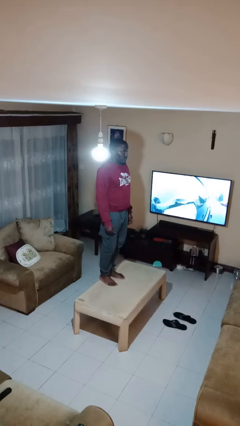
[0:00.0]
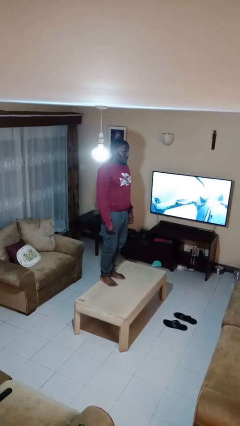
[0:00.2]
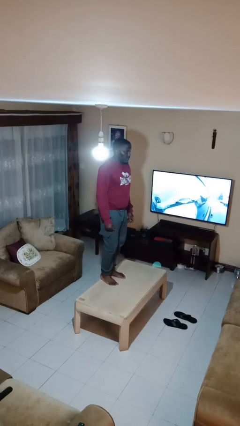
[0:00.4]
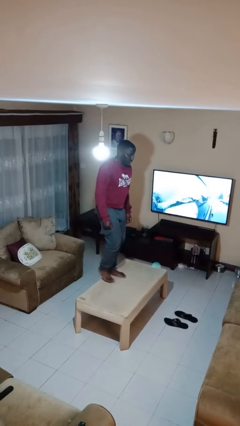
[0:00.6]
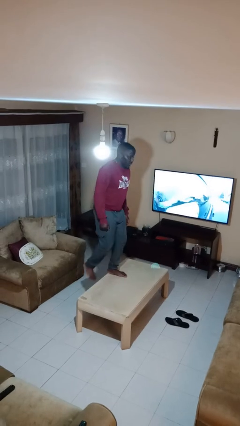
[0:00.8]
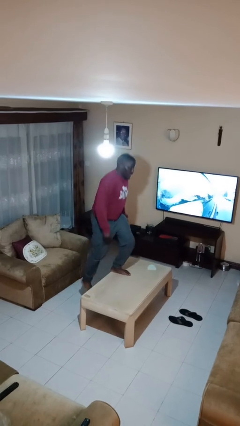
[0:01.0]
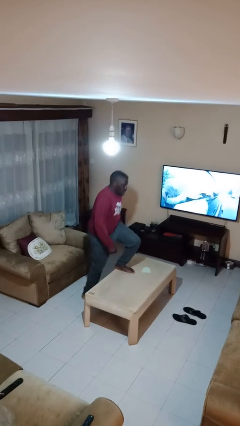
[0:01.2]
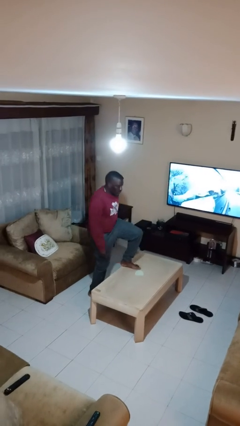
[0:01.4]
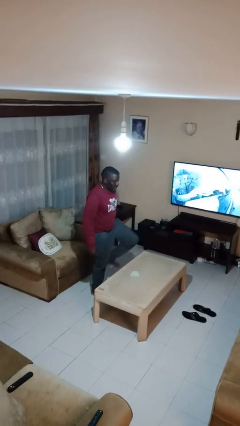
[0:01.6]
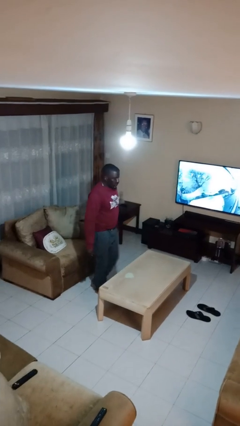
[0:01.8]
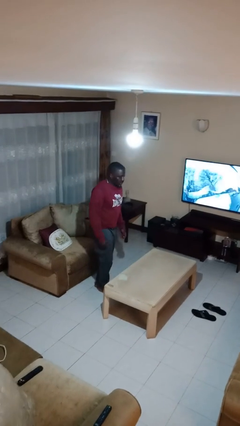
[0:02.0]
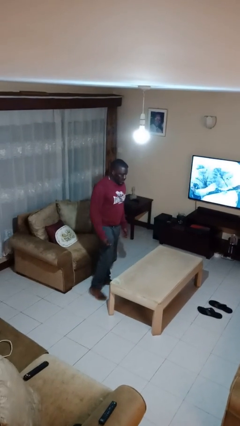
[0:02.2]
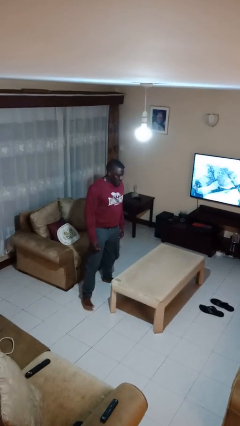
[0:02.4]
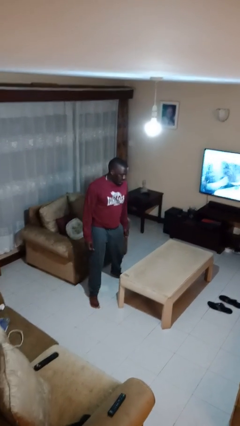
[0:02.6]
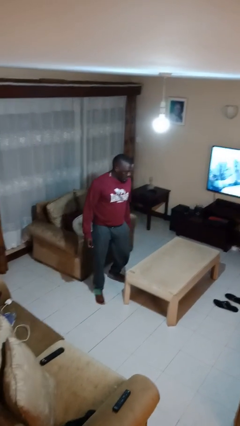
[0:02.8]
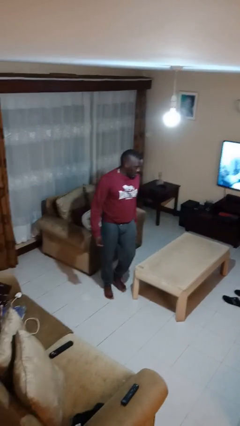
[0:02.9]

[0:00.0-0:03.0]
person climbs off table

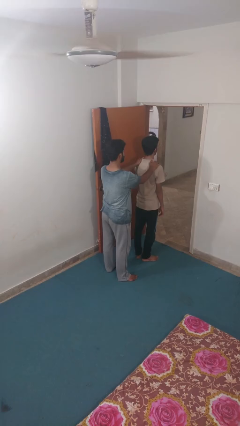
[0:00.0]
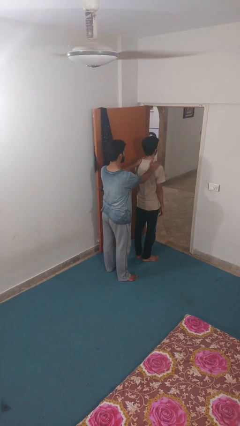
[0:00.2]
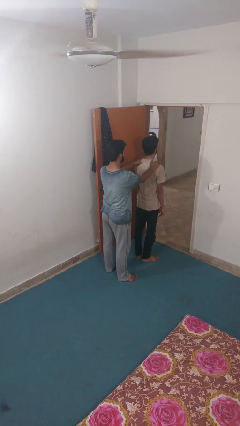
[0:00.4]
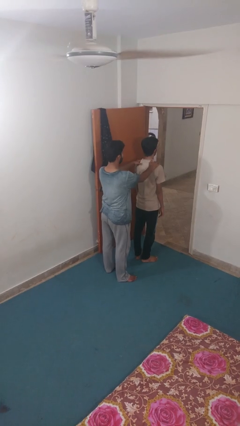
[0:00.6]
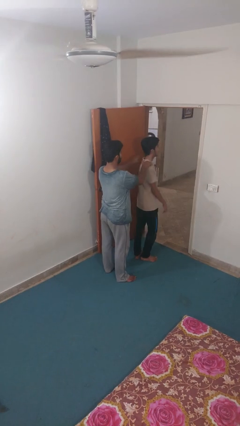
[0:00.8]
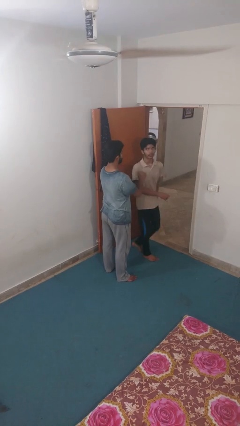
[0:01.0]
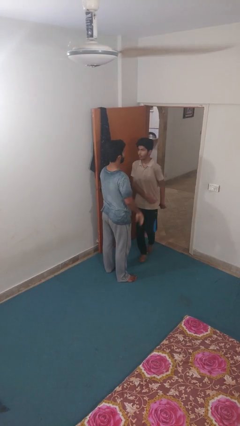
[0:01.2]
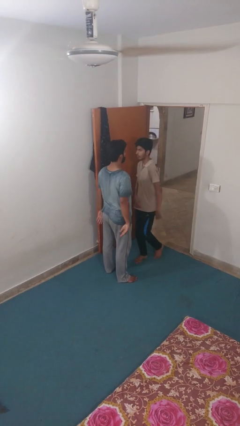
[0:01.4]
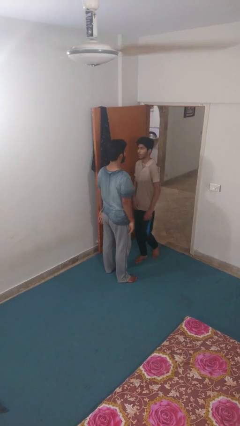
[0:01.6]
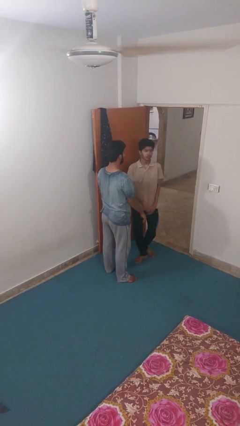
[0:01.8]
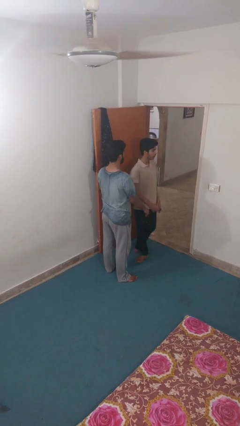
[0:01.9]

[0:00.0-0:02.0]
person spins person around

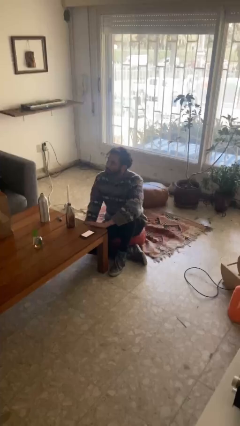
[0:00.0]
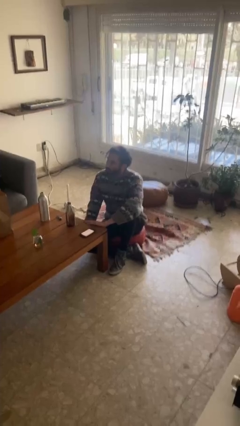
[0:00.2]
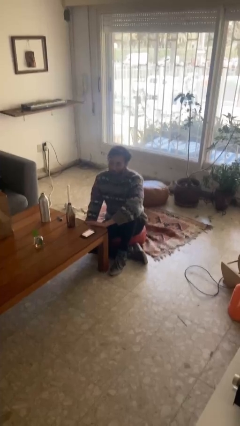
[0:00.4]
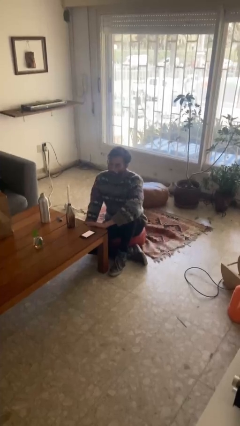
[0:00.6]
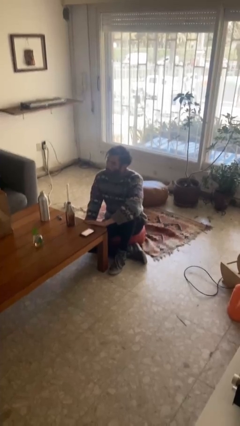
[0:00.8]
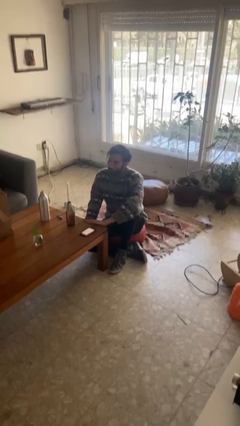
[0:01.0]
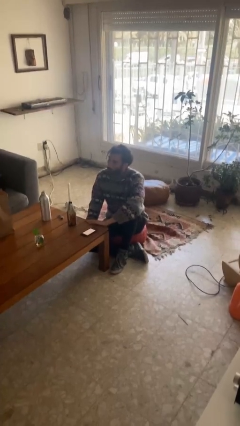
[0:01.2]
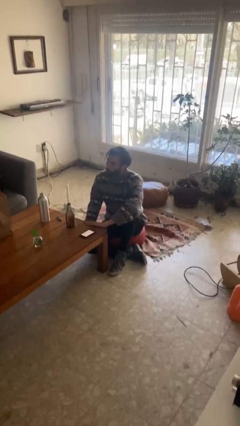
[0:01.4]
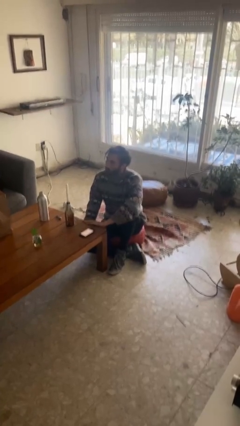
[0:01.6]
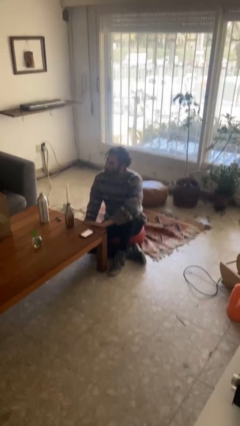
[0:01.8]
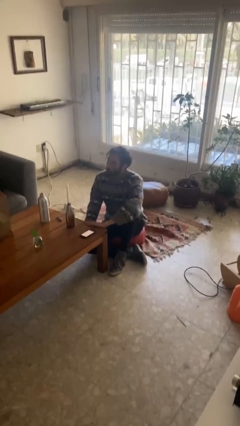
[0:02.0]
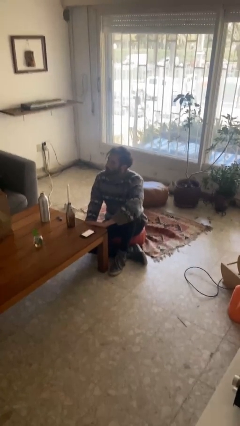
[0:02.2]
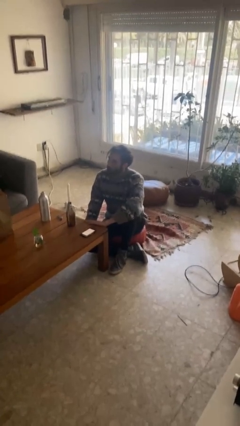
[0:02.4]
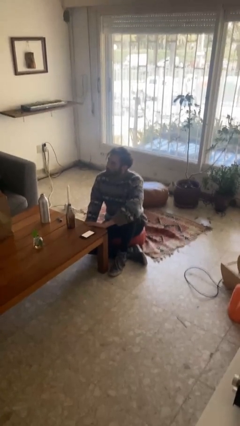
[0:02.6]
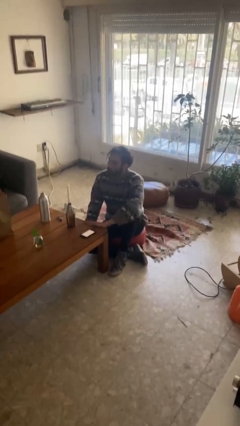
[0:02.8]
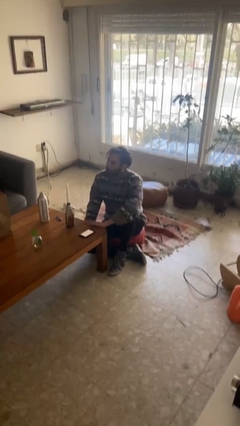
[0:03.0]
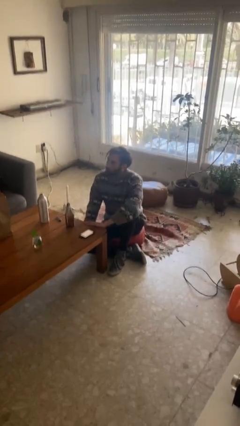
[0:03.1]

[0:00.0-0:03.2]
person shakes head

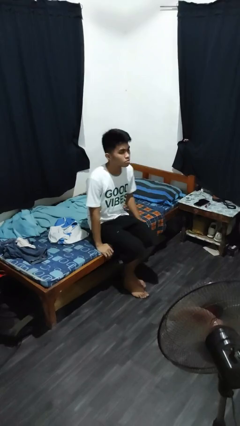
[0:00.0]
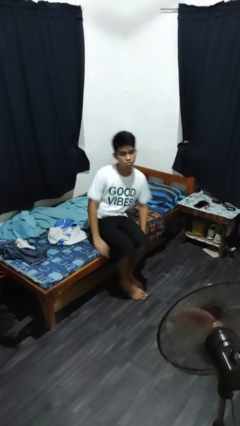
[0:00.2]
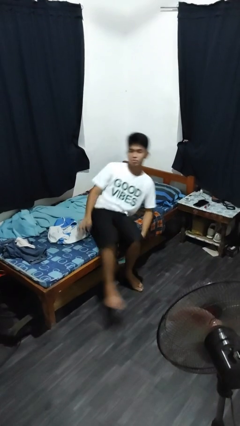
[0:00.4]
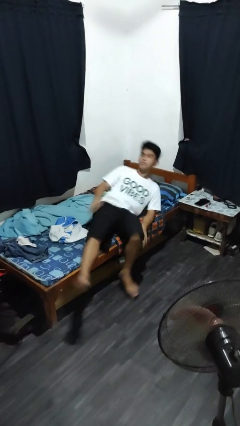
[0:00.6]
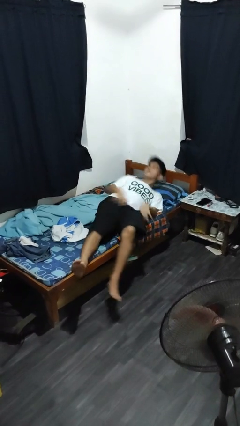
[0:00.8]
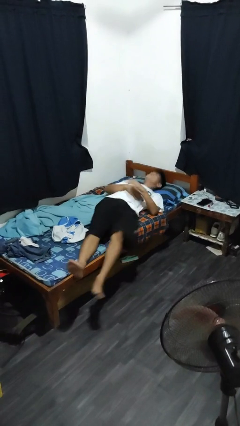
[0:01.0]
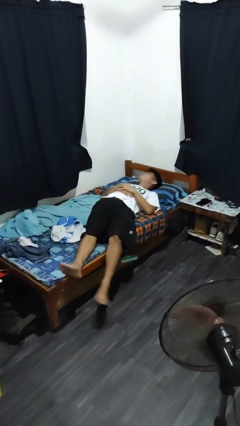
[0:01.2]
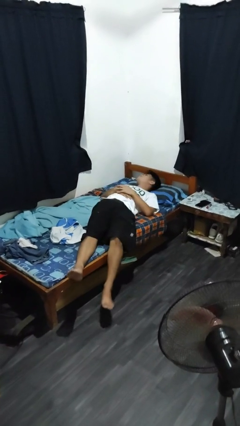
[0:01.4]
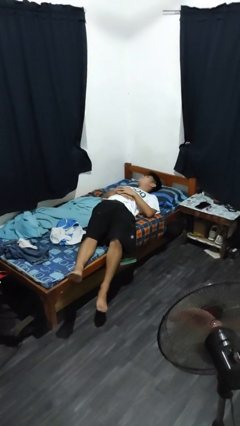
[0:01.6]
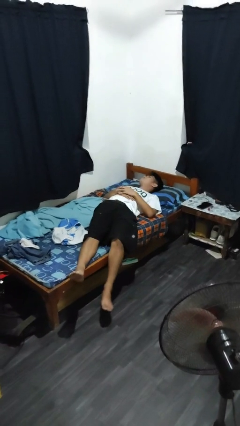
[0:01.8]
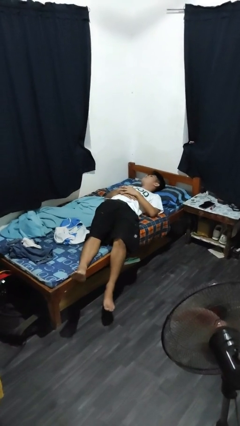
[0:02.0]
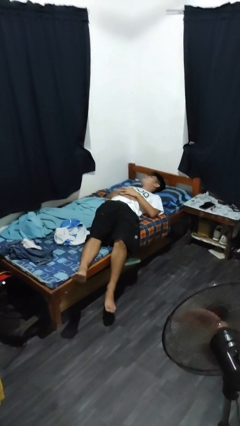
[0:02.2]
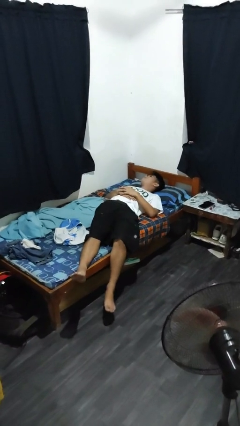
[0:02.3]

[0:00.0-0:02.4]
person lies down on bed

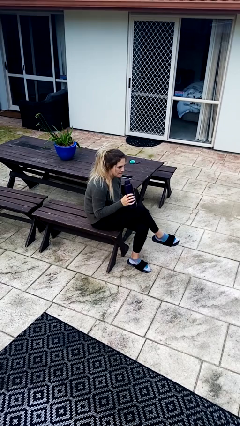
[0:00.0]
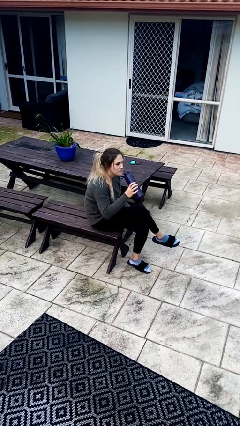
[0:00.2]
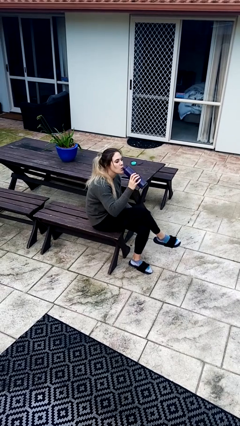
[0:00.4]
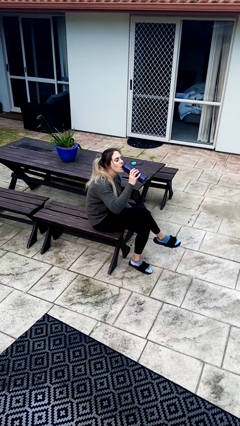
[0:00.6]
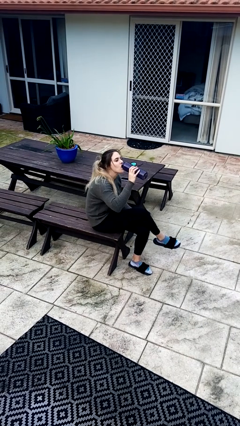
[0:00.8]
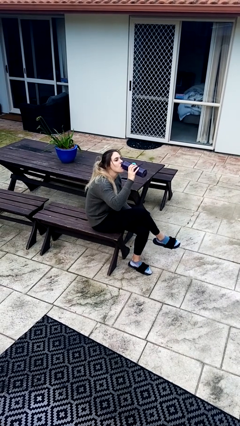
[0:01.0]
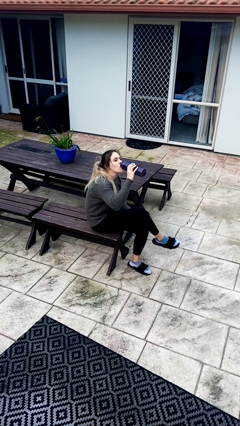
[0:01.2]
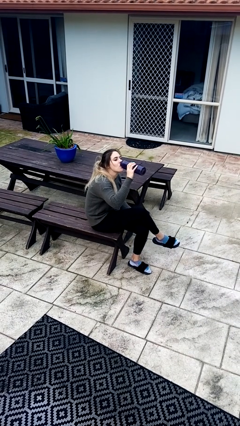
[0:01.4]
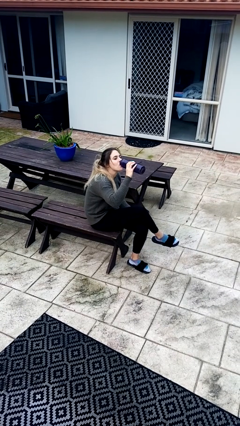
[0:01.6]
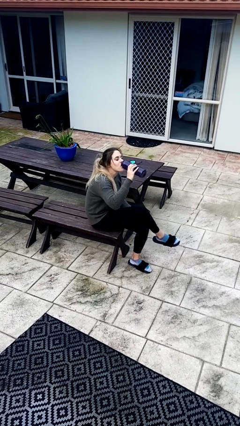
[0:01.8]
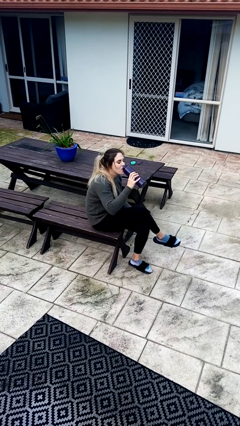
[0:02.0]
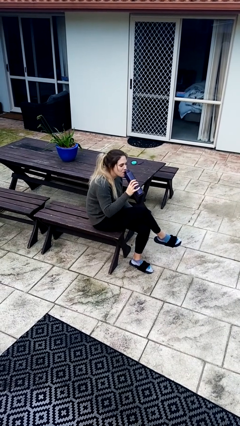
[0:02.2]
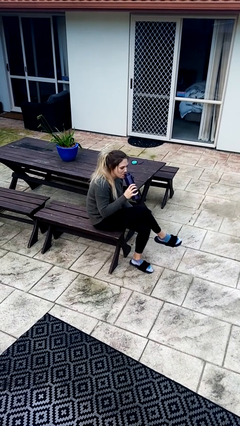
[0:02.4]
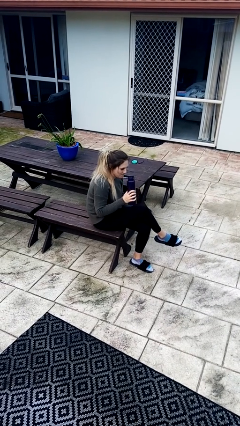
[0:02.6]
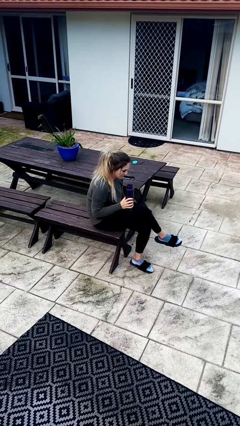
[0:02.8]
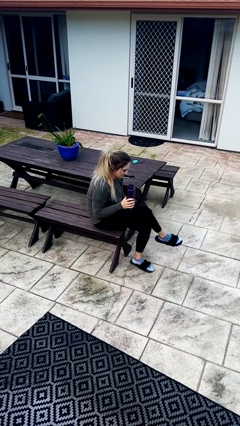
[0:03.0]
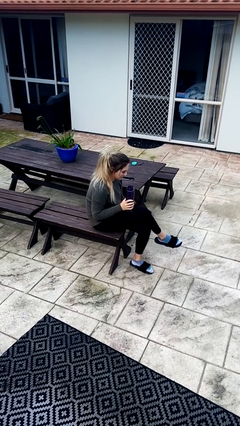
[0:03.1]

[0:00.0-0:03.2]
person drinks from bottle

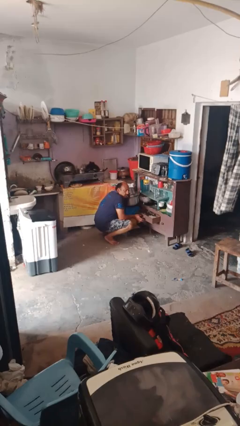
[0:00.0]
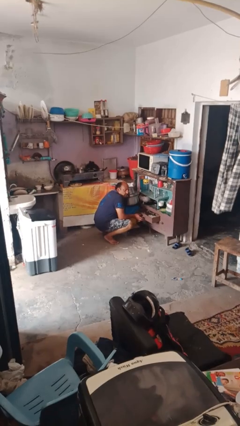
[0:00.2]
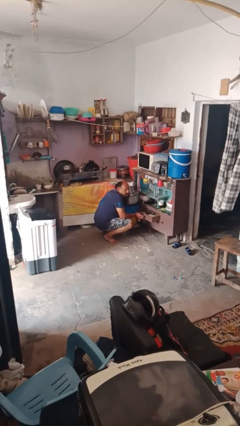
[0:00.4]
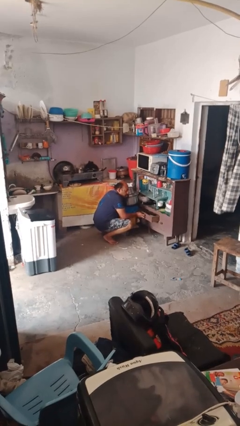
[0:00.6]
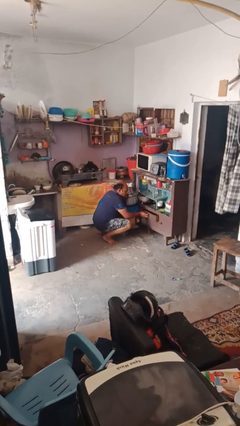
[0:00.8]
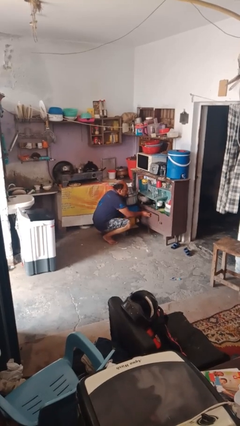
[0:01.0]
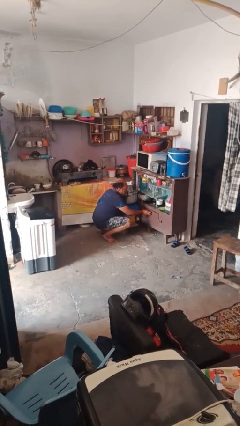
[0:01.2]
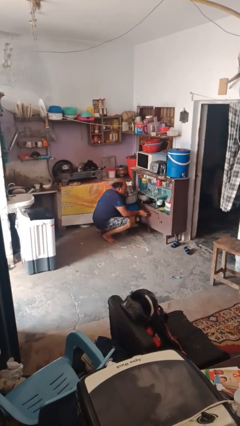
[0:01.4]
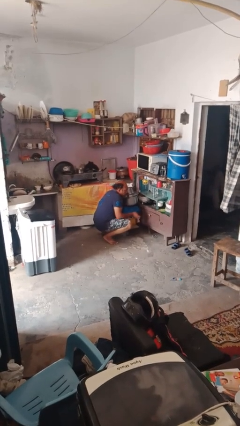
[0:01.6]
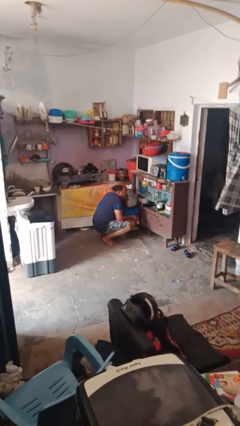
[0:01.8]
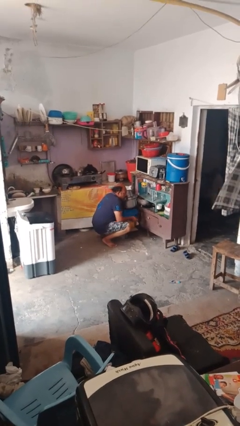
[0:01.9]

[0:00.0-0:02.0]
person closes kitchen drawer

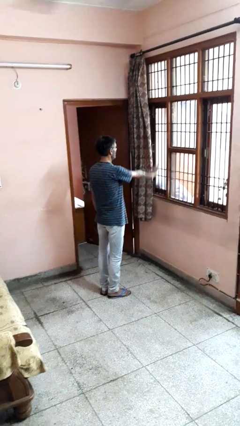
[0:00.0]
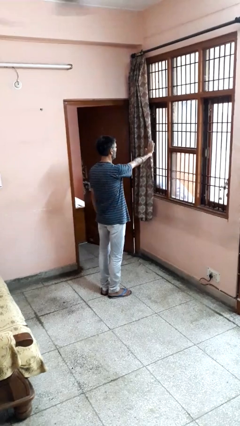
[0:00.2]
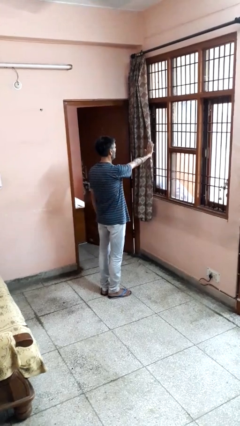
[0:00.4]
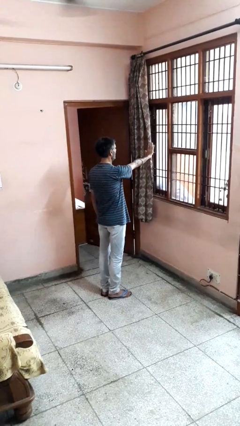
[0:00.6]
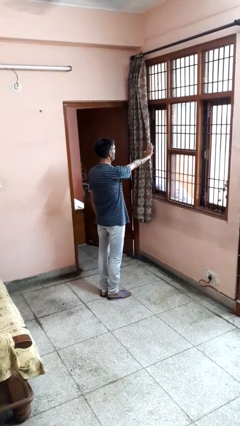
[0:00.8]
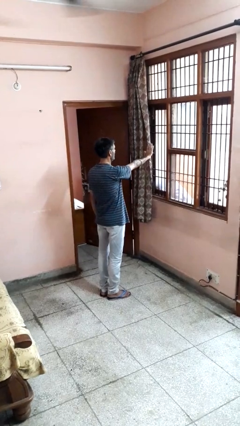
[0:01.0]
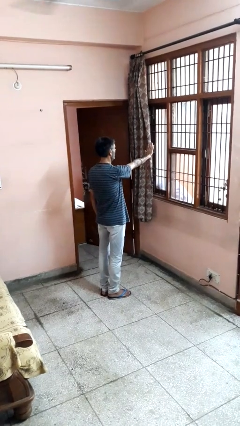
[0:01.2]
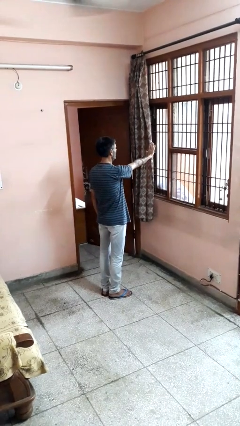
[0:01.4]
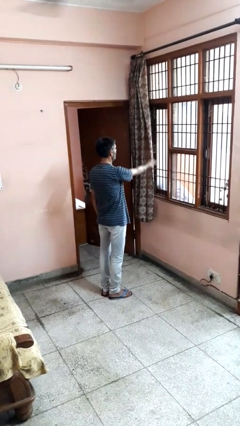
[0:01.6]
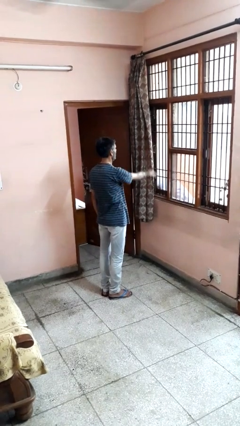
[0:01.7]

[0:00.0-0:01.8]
person gestures stop
